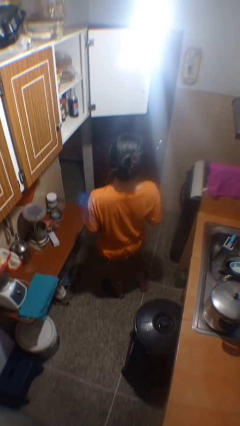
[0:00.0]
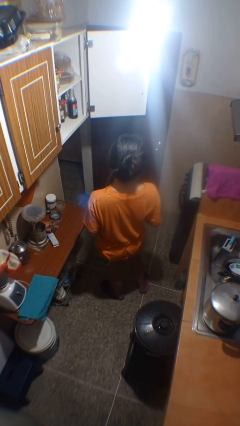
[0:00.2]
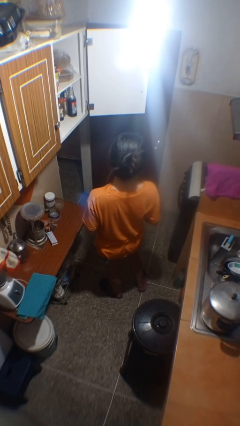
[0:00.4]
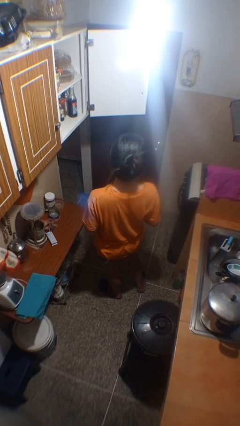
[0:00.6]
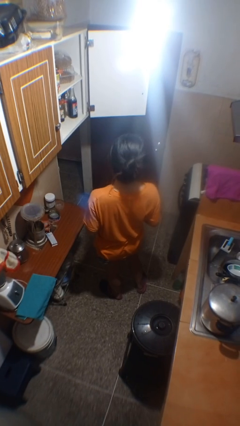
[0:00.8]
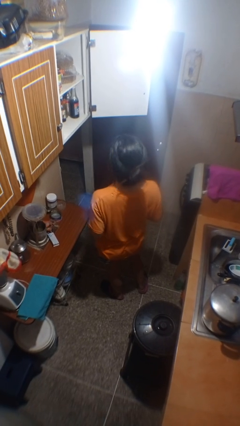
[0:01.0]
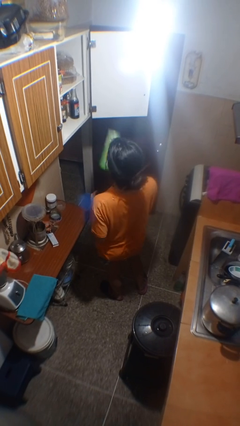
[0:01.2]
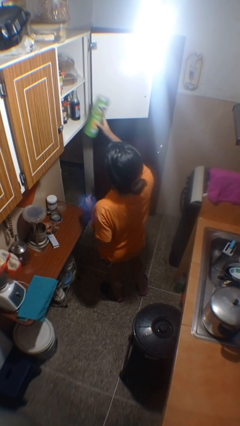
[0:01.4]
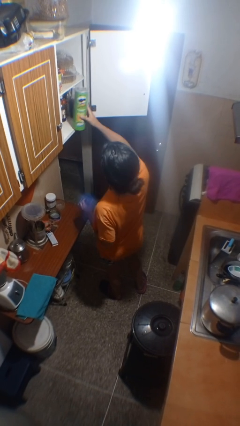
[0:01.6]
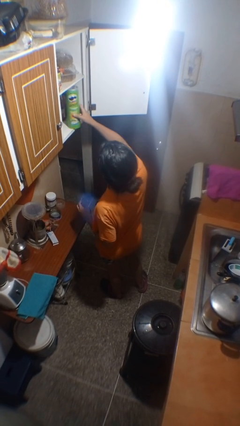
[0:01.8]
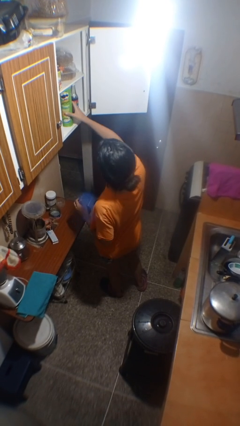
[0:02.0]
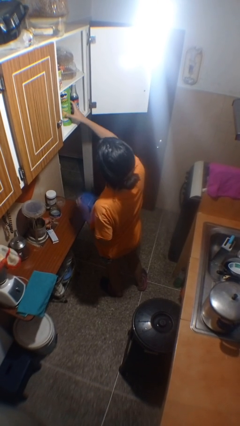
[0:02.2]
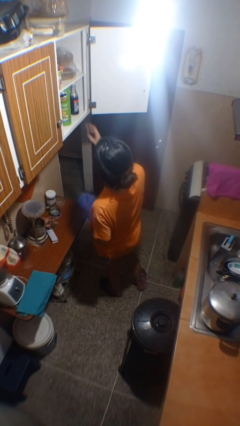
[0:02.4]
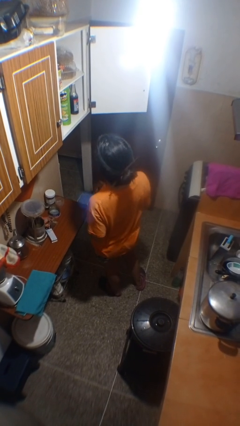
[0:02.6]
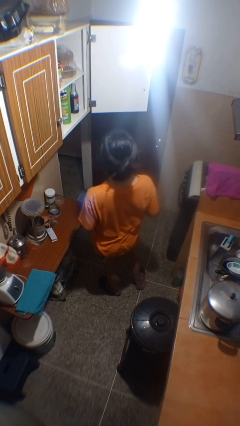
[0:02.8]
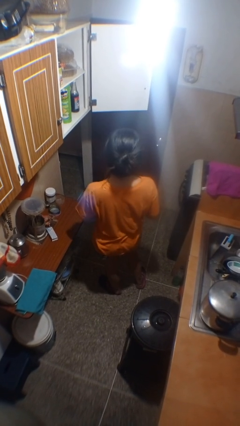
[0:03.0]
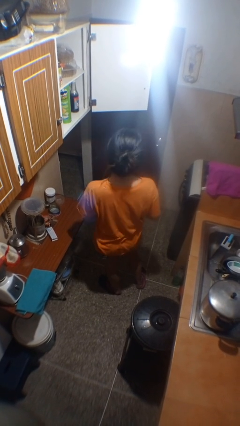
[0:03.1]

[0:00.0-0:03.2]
person puts object in cabinet

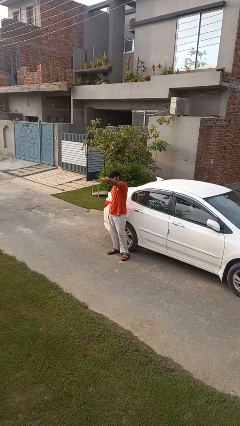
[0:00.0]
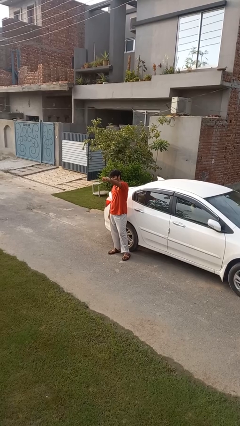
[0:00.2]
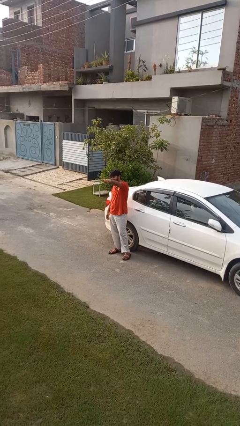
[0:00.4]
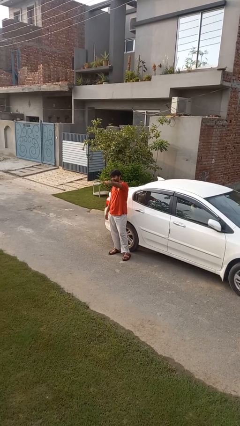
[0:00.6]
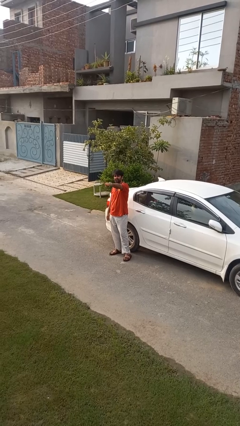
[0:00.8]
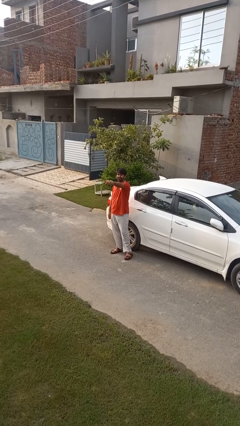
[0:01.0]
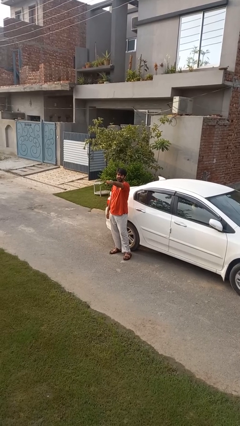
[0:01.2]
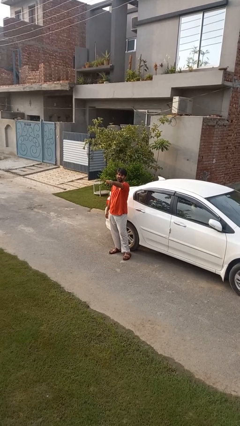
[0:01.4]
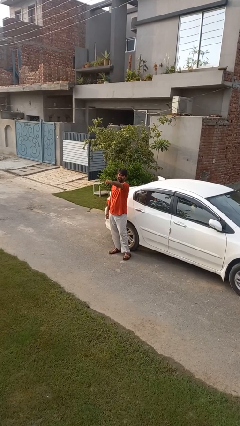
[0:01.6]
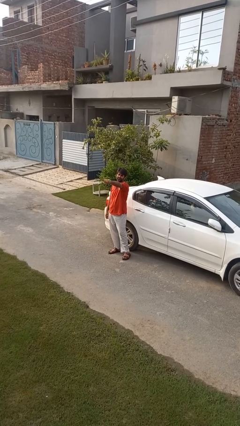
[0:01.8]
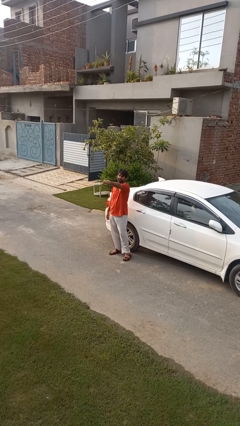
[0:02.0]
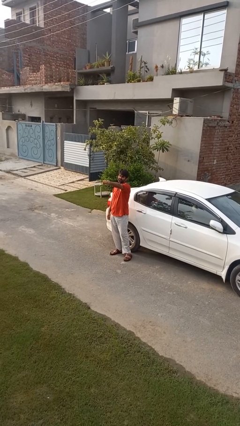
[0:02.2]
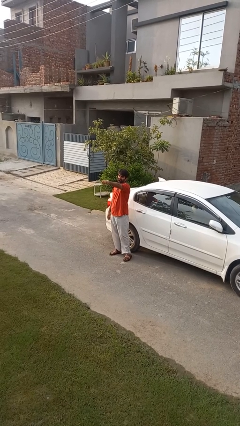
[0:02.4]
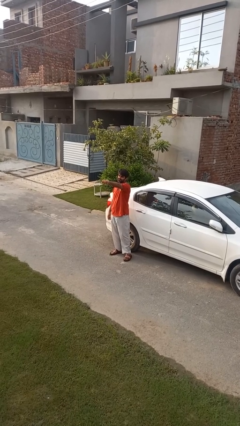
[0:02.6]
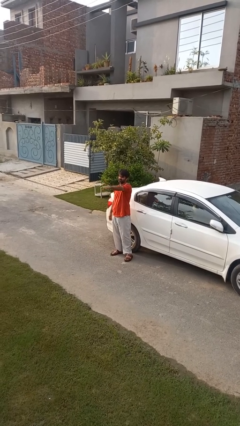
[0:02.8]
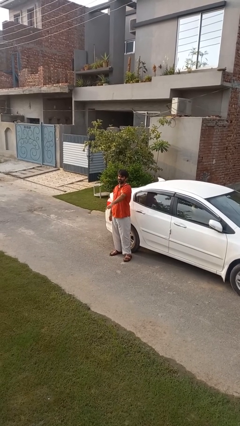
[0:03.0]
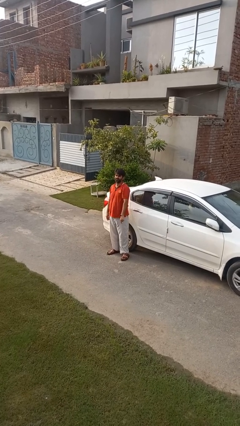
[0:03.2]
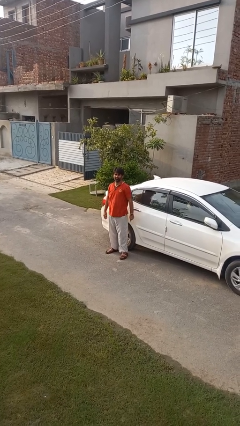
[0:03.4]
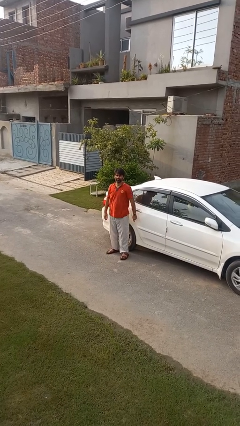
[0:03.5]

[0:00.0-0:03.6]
person points at person

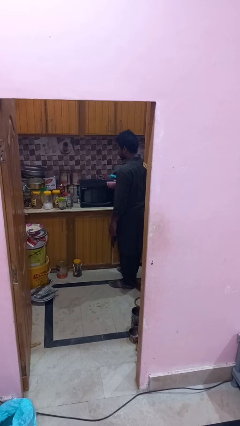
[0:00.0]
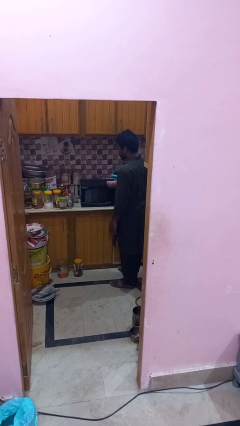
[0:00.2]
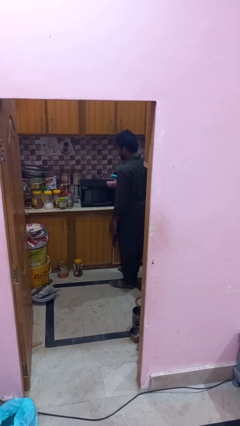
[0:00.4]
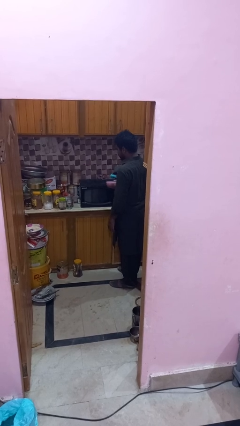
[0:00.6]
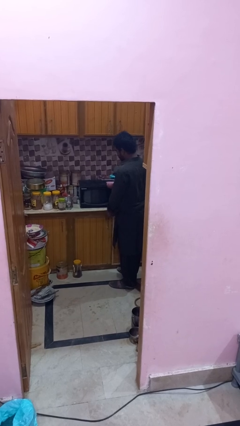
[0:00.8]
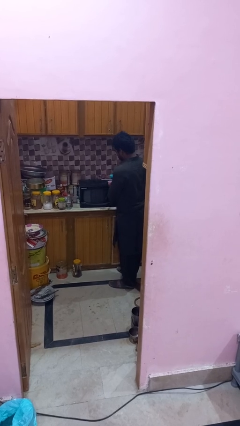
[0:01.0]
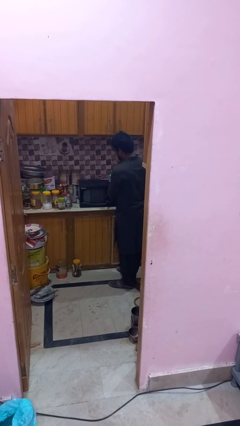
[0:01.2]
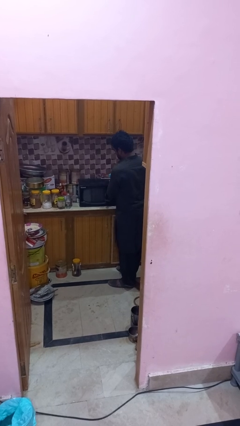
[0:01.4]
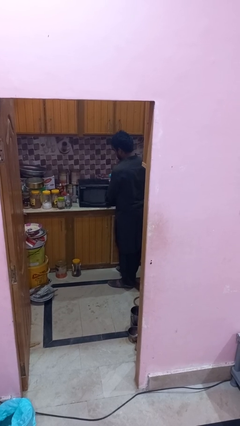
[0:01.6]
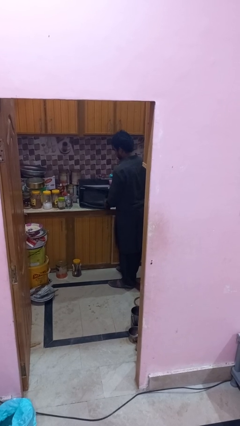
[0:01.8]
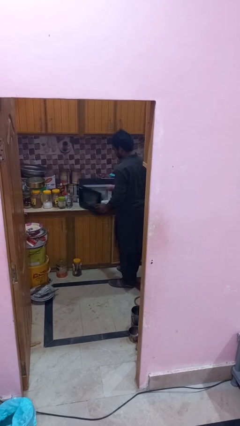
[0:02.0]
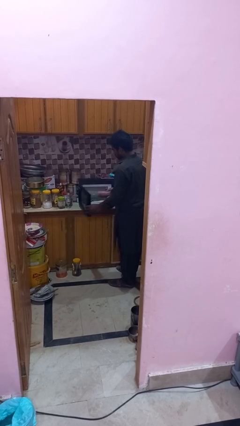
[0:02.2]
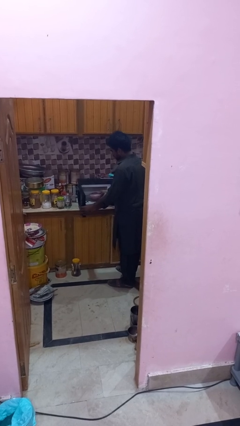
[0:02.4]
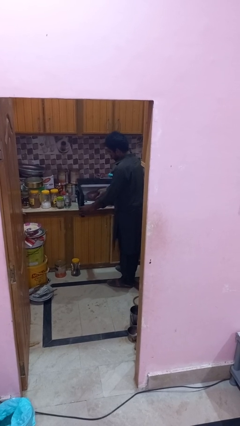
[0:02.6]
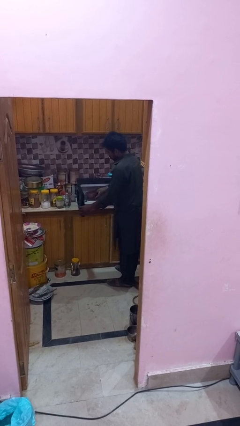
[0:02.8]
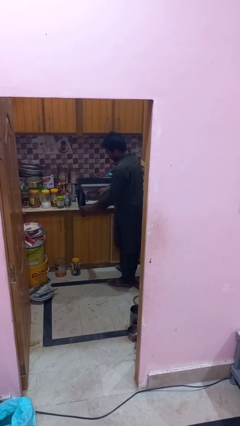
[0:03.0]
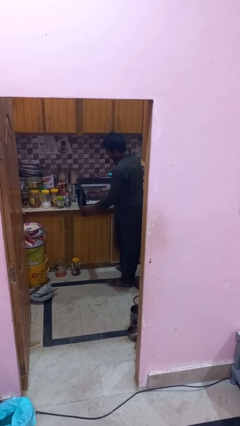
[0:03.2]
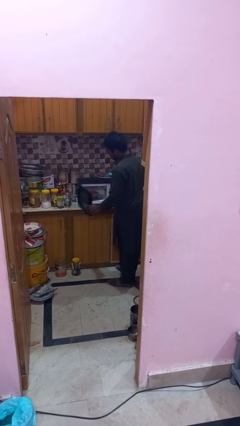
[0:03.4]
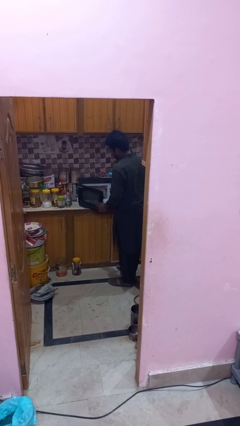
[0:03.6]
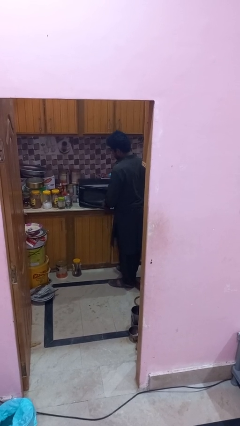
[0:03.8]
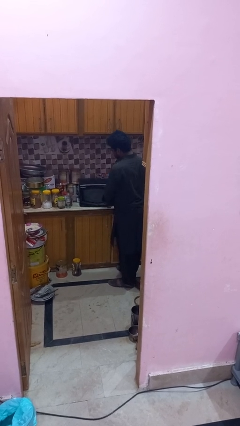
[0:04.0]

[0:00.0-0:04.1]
person puts object into microwave

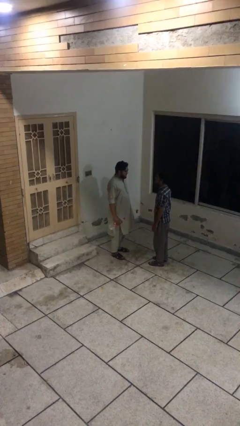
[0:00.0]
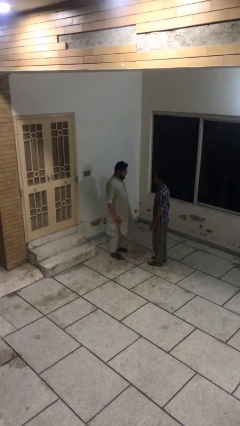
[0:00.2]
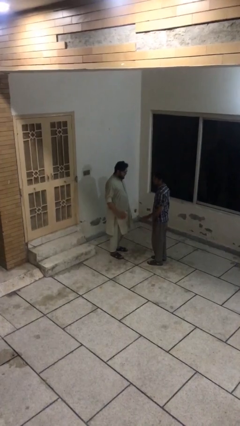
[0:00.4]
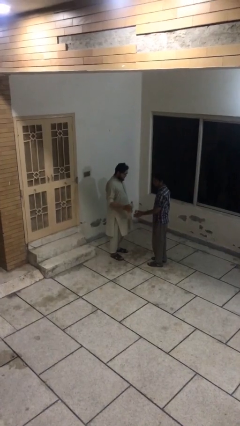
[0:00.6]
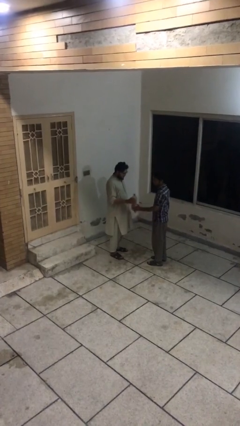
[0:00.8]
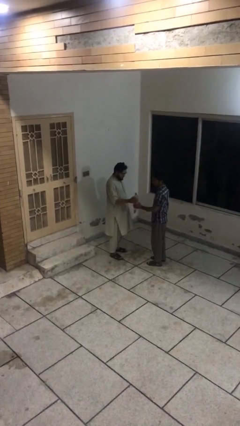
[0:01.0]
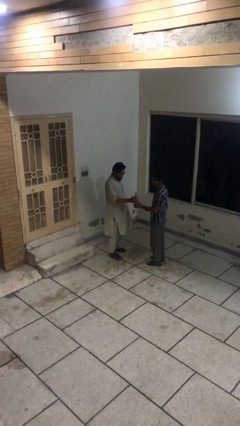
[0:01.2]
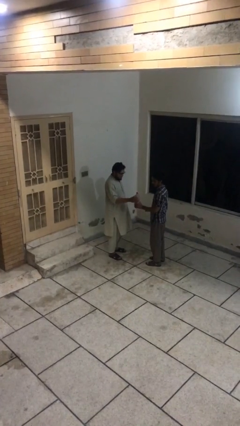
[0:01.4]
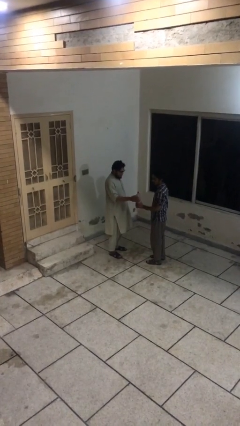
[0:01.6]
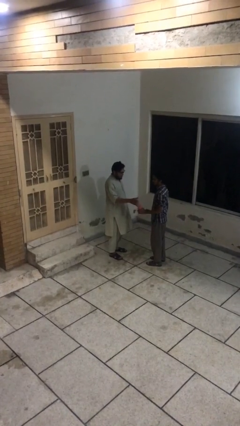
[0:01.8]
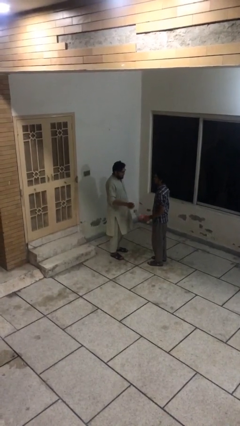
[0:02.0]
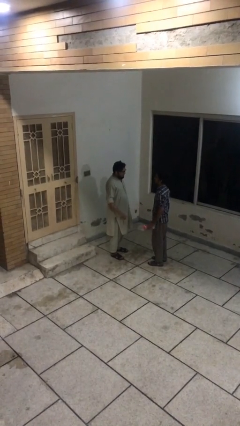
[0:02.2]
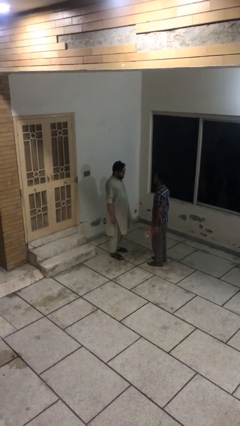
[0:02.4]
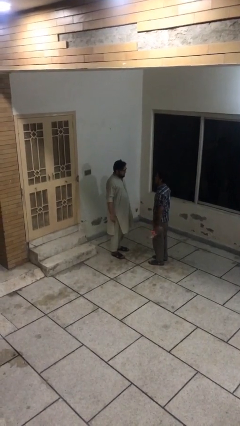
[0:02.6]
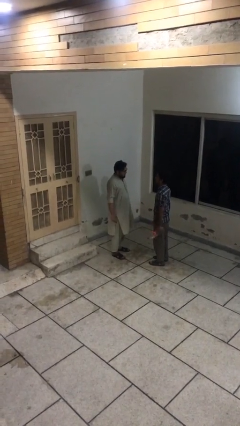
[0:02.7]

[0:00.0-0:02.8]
person transfers object to person

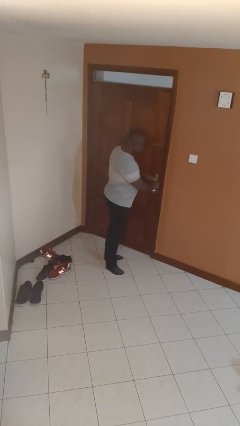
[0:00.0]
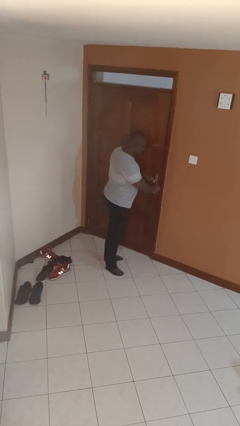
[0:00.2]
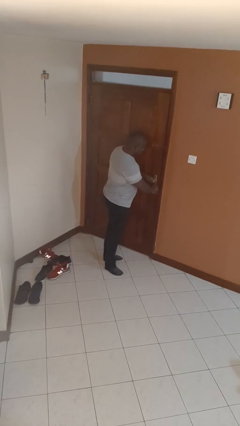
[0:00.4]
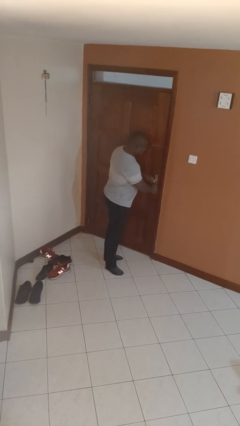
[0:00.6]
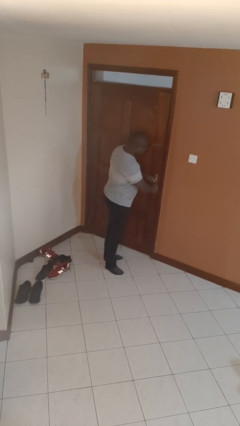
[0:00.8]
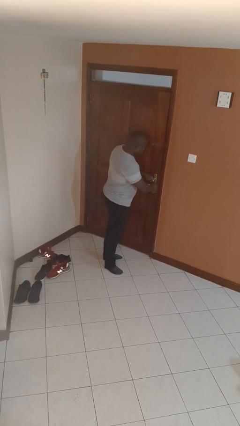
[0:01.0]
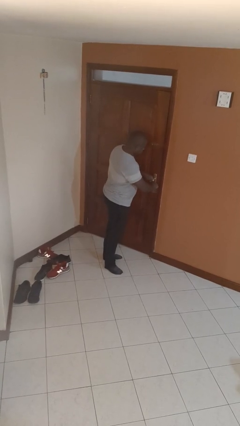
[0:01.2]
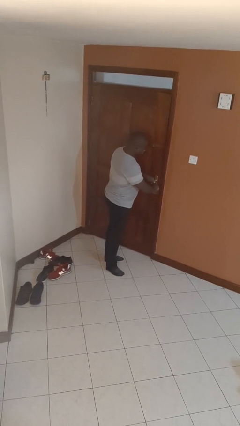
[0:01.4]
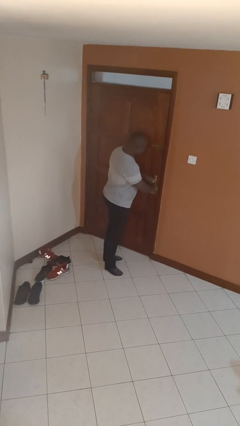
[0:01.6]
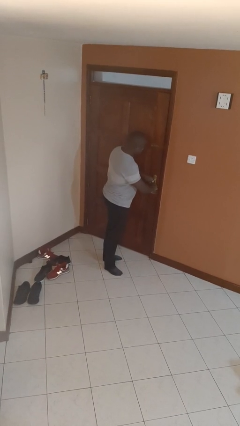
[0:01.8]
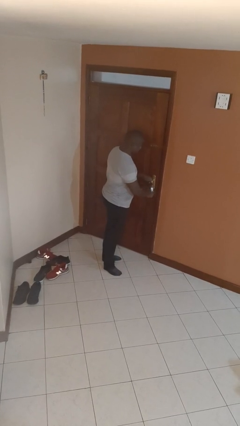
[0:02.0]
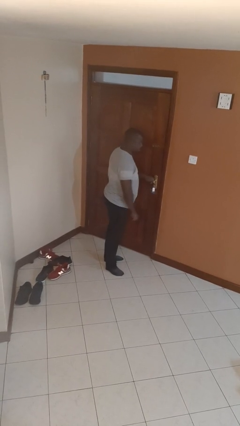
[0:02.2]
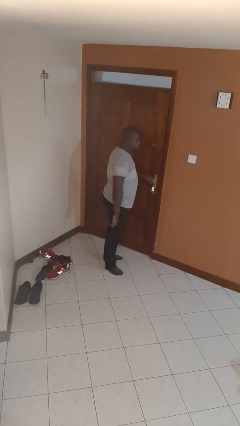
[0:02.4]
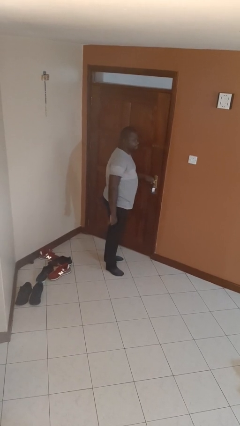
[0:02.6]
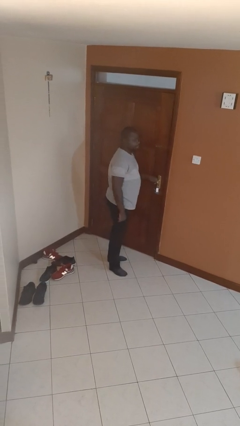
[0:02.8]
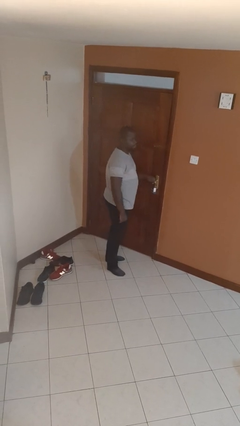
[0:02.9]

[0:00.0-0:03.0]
person locks door with keys

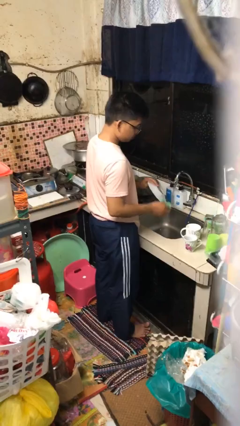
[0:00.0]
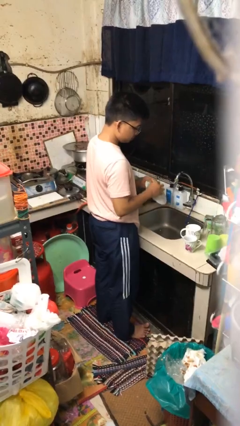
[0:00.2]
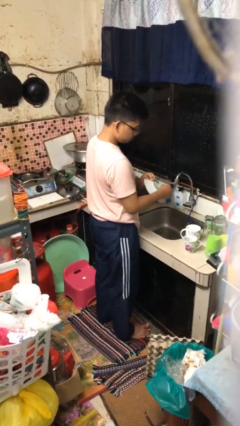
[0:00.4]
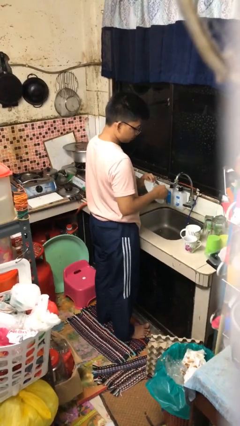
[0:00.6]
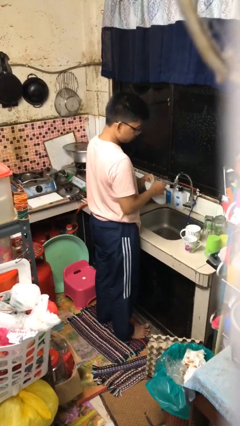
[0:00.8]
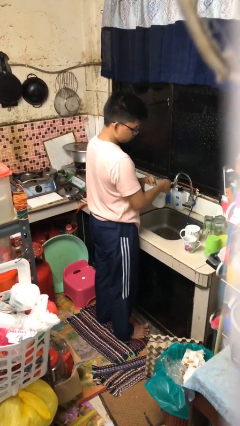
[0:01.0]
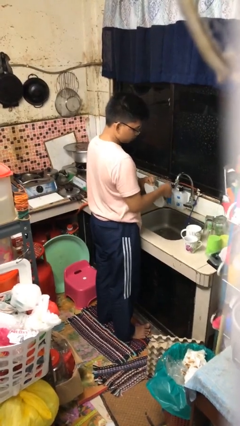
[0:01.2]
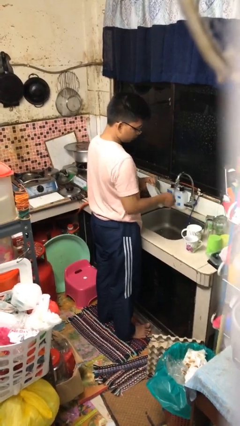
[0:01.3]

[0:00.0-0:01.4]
person washes dish
